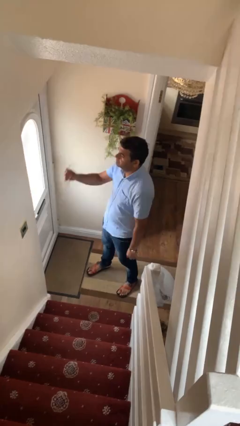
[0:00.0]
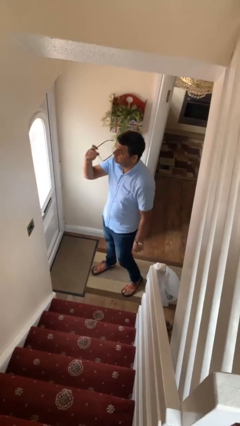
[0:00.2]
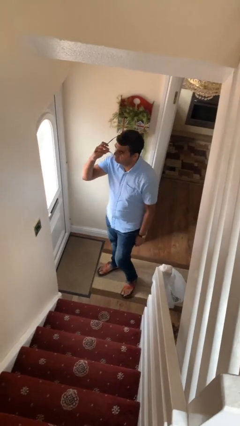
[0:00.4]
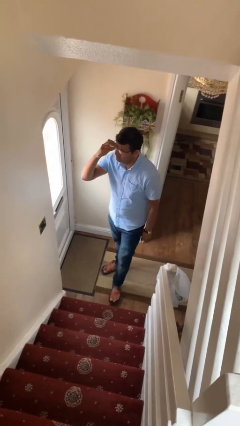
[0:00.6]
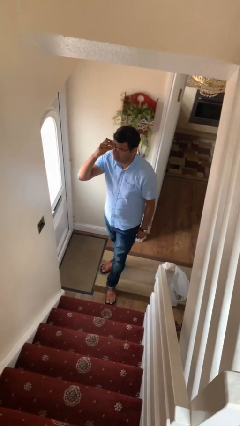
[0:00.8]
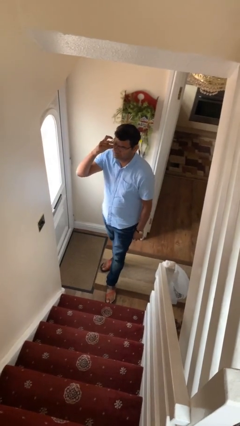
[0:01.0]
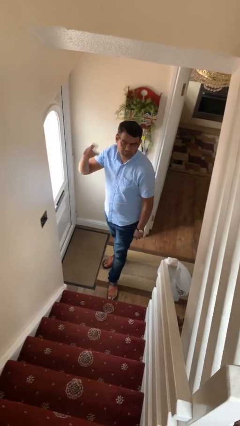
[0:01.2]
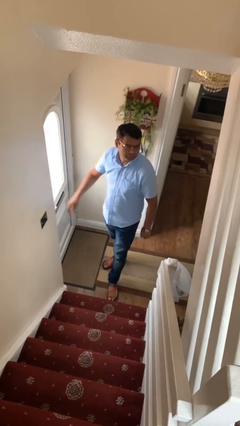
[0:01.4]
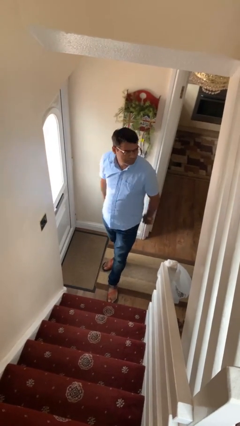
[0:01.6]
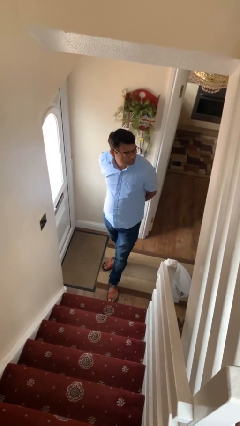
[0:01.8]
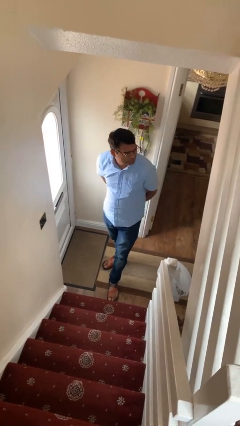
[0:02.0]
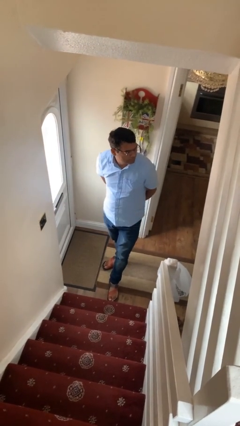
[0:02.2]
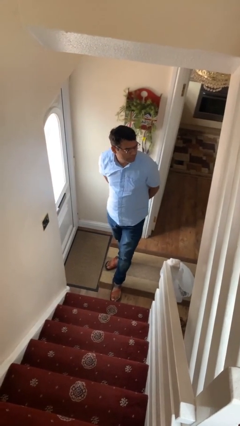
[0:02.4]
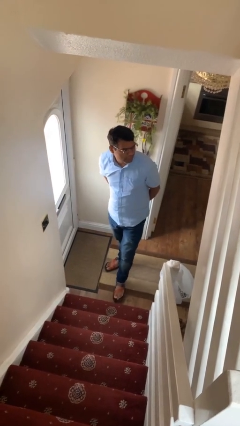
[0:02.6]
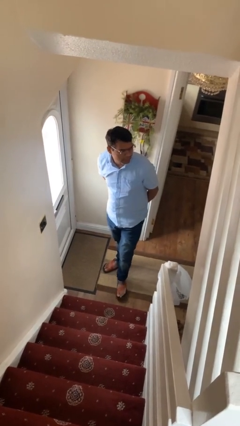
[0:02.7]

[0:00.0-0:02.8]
person puts on glasses

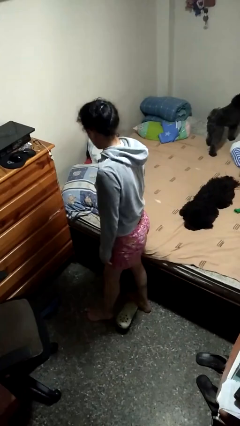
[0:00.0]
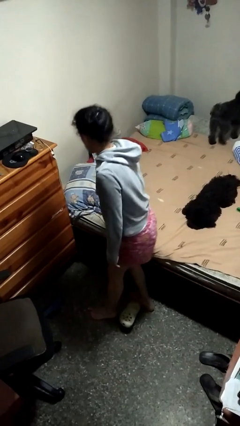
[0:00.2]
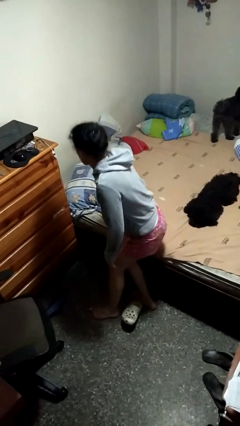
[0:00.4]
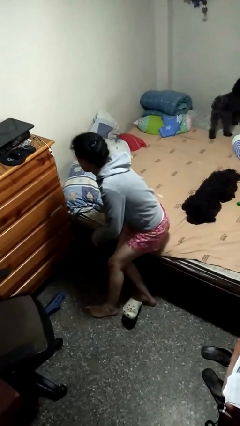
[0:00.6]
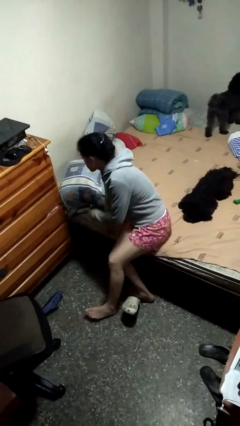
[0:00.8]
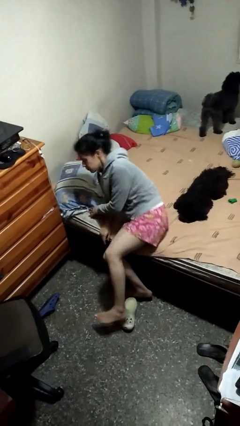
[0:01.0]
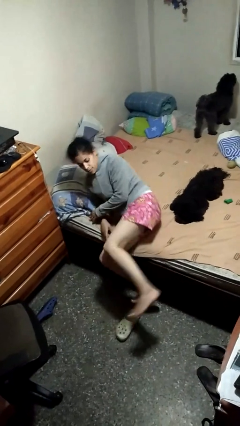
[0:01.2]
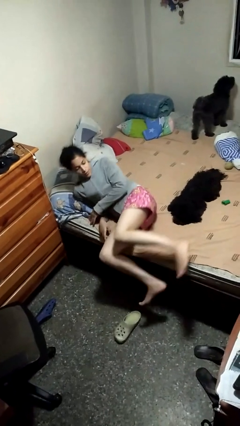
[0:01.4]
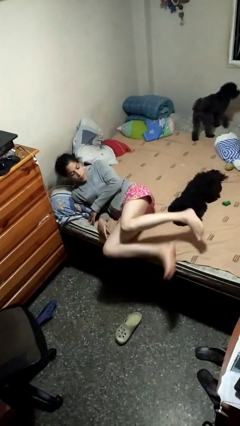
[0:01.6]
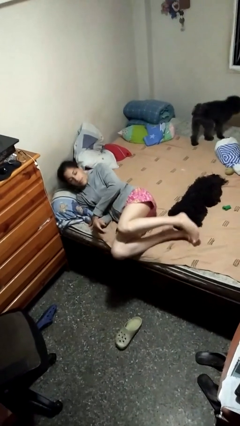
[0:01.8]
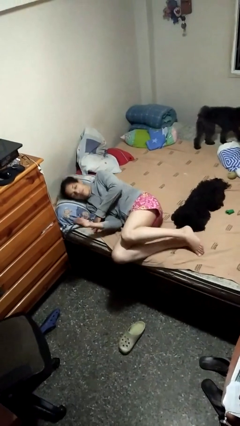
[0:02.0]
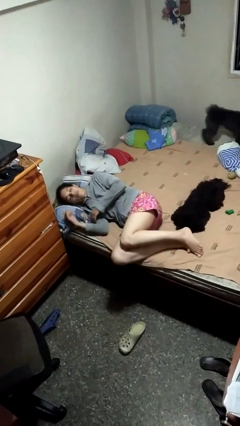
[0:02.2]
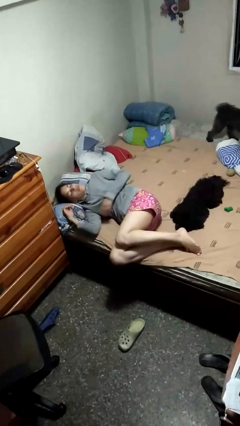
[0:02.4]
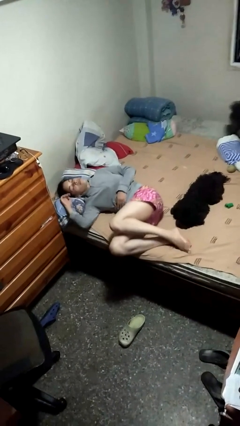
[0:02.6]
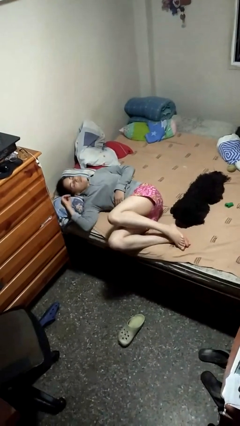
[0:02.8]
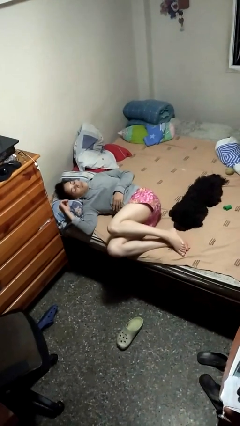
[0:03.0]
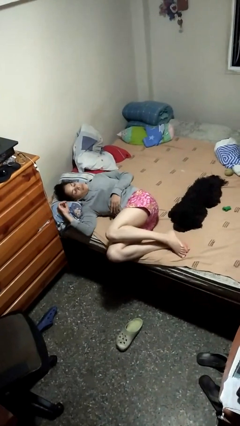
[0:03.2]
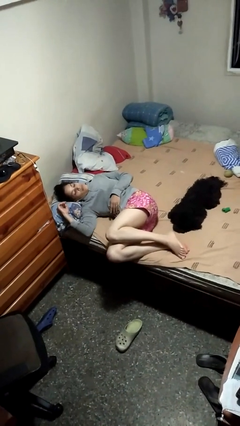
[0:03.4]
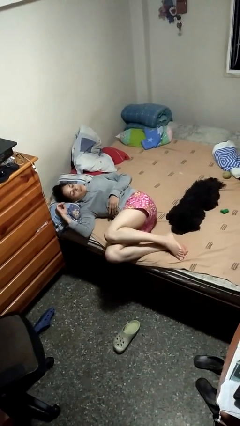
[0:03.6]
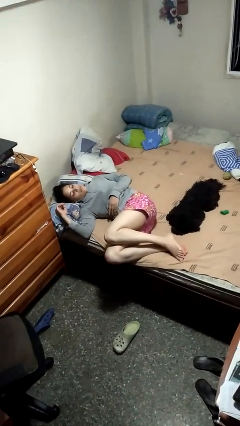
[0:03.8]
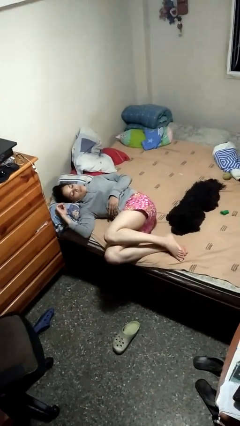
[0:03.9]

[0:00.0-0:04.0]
person lies down on bed

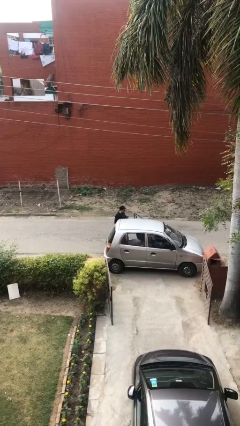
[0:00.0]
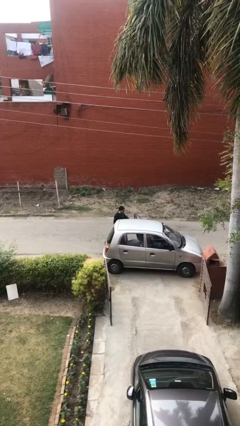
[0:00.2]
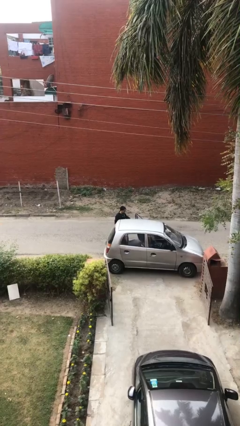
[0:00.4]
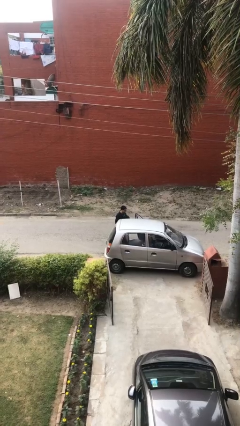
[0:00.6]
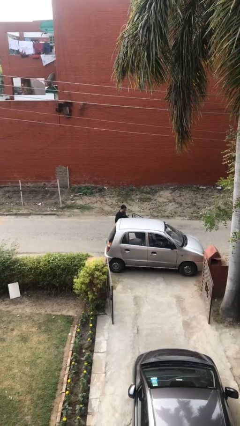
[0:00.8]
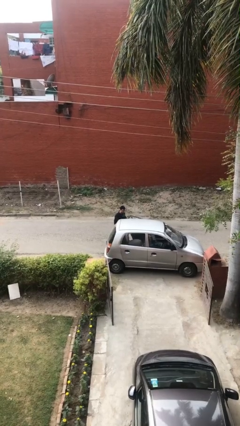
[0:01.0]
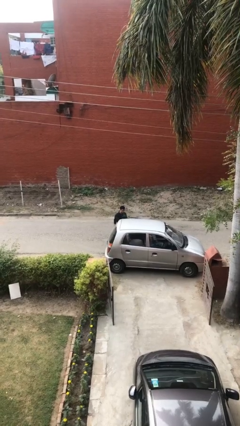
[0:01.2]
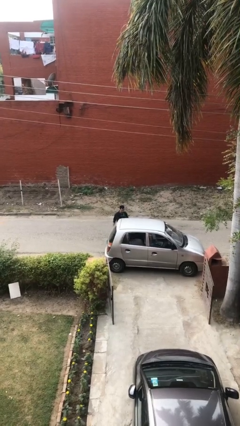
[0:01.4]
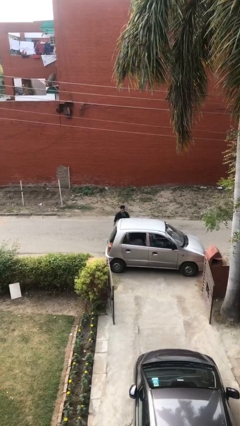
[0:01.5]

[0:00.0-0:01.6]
person closes car door

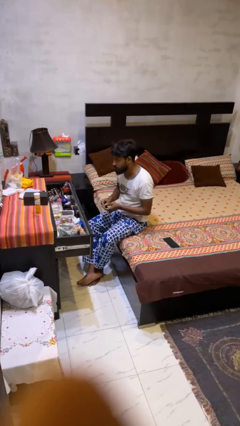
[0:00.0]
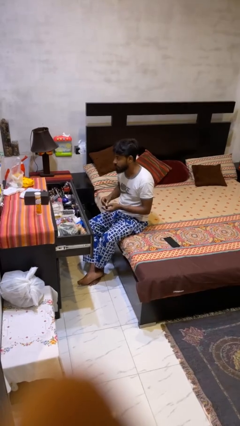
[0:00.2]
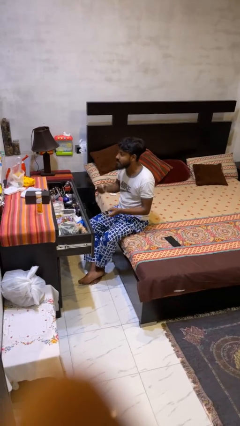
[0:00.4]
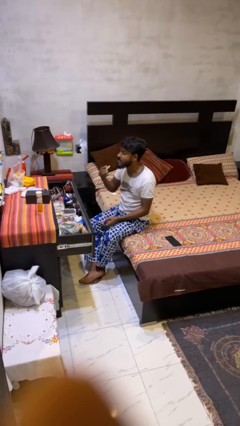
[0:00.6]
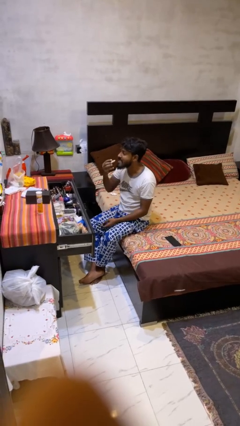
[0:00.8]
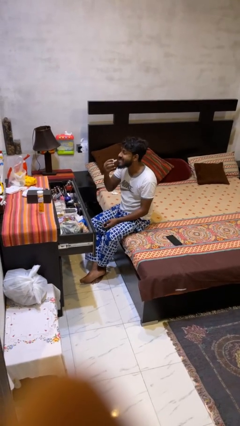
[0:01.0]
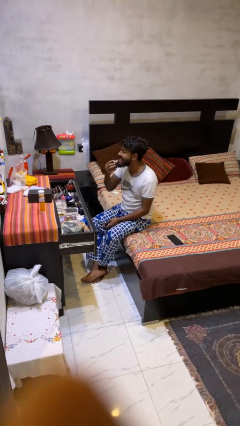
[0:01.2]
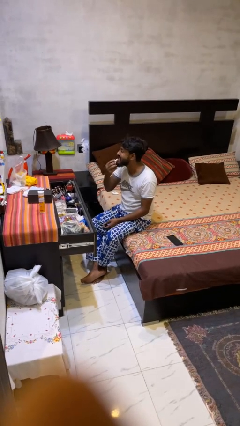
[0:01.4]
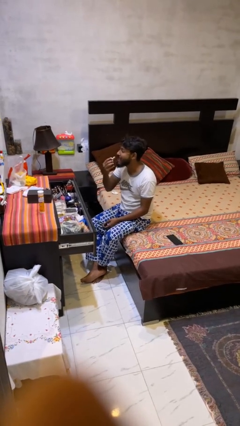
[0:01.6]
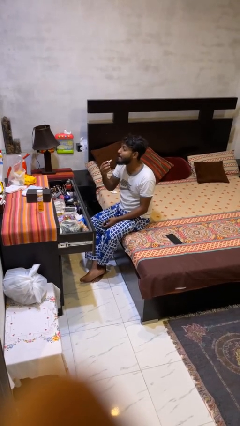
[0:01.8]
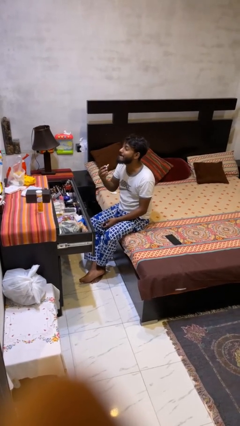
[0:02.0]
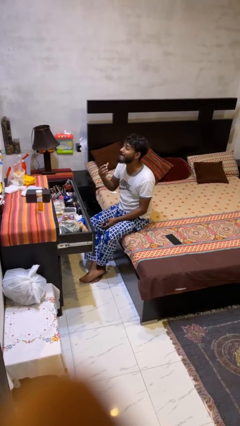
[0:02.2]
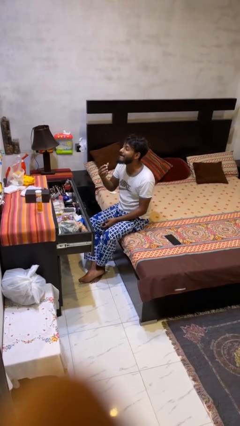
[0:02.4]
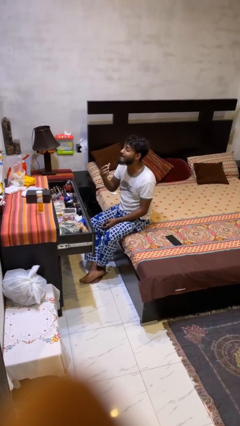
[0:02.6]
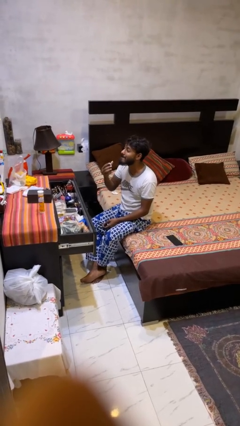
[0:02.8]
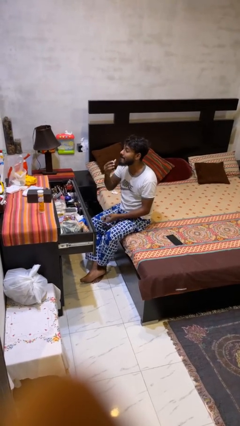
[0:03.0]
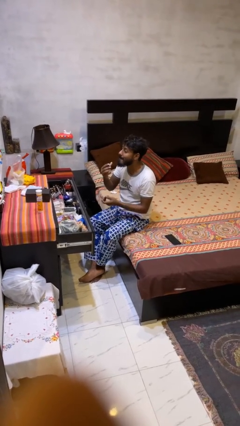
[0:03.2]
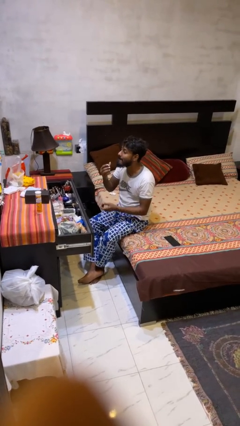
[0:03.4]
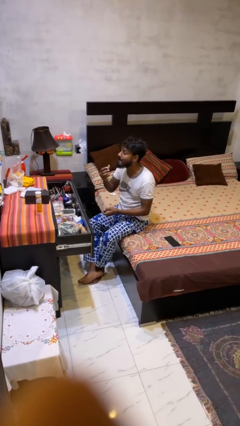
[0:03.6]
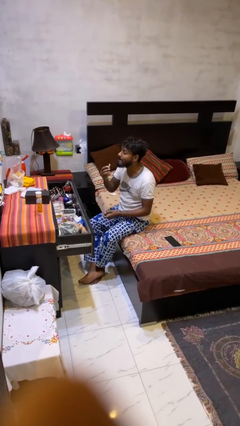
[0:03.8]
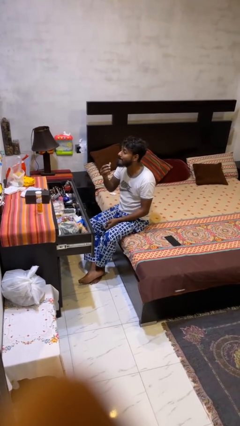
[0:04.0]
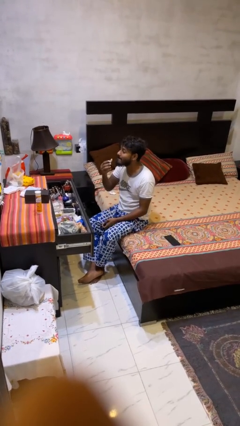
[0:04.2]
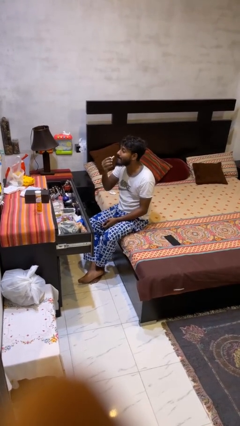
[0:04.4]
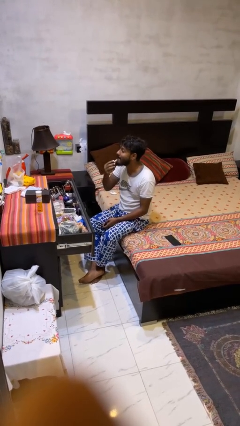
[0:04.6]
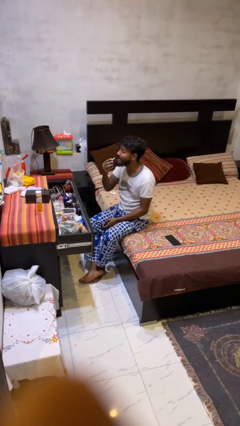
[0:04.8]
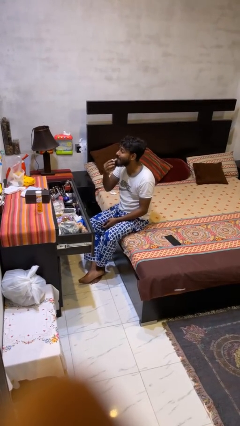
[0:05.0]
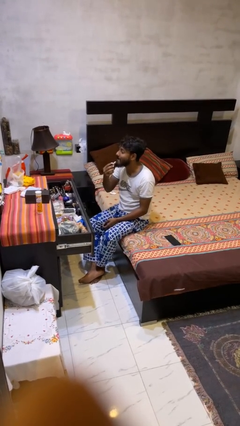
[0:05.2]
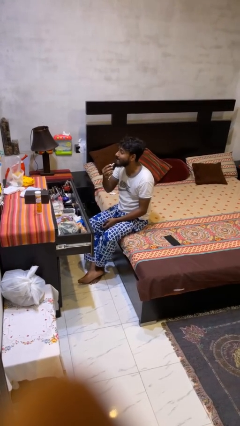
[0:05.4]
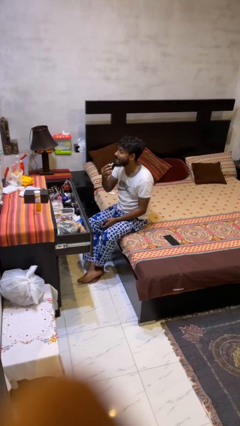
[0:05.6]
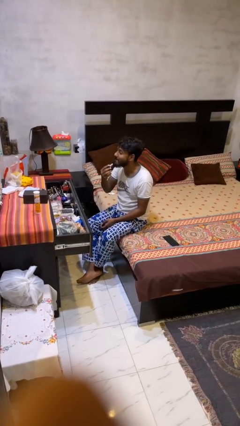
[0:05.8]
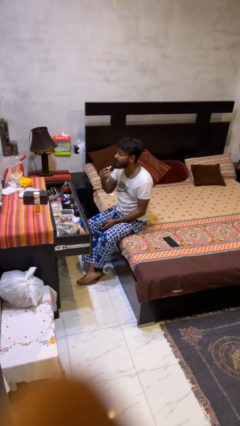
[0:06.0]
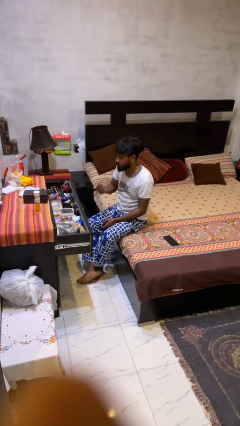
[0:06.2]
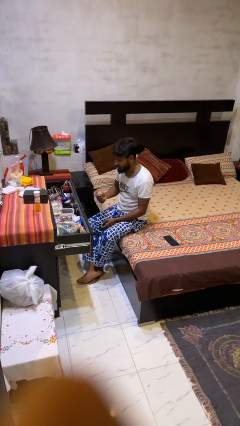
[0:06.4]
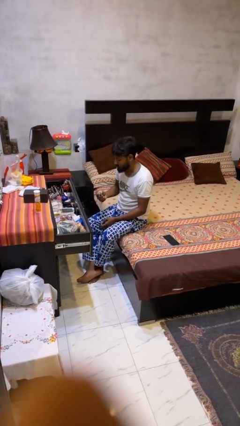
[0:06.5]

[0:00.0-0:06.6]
person applies lip makeup

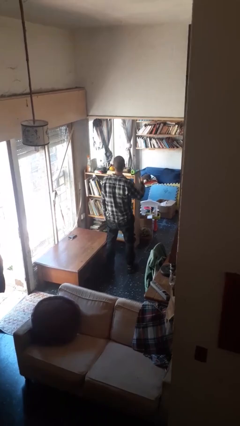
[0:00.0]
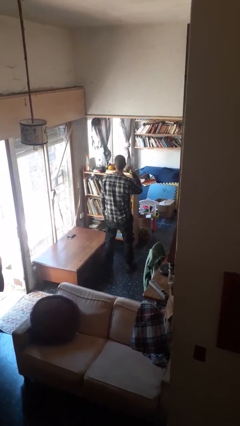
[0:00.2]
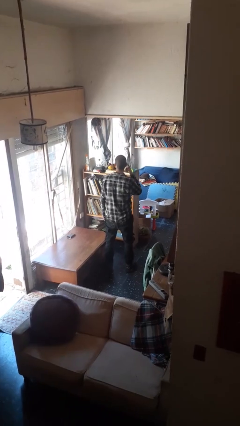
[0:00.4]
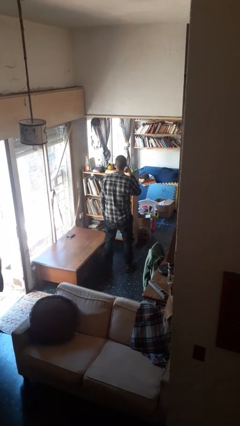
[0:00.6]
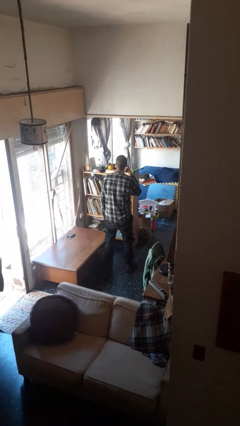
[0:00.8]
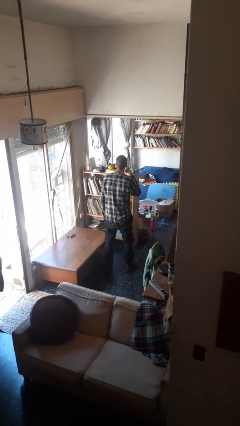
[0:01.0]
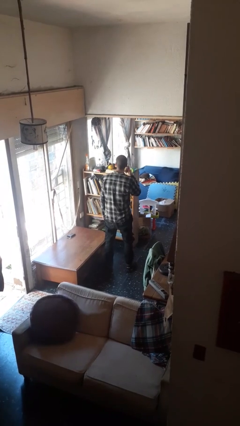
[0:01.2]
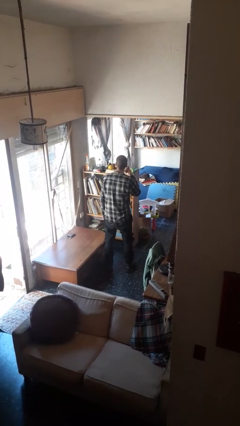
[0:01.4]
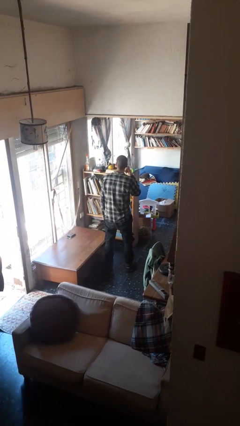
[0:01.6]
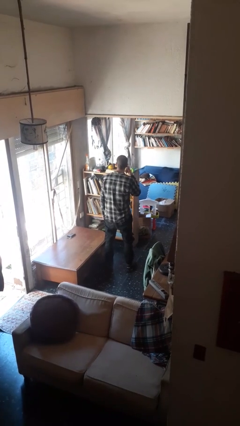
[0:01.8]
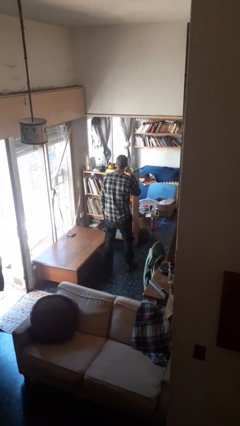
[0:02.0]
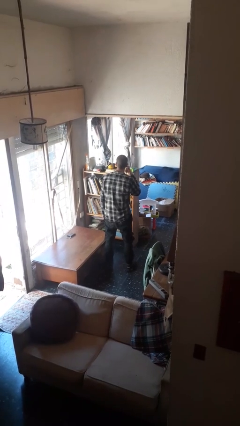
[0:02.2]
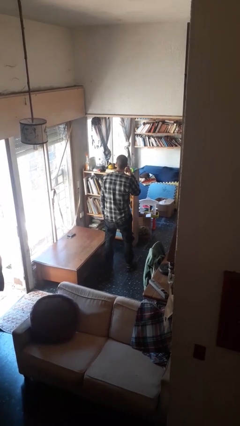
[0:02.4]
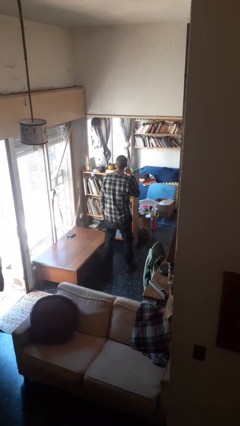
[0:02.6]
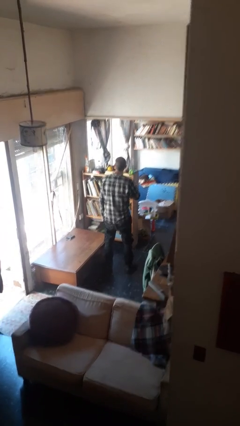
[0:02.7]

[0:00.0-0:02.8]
person gestures listen closely
